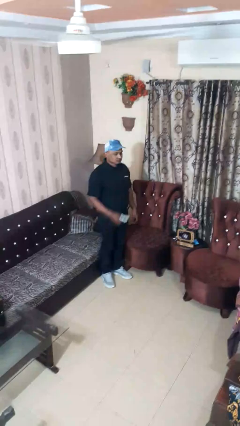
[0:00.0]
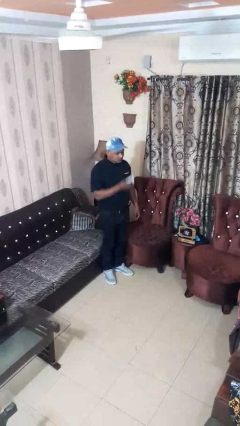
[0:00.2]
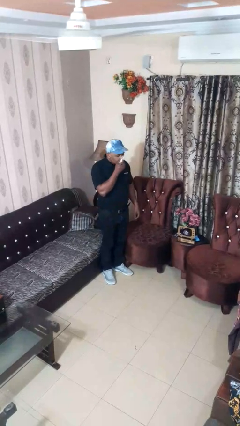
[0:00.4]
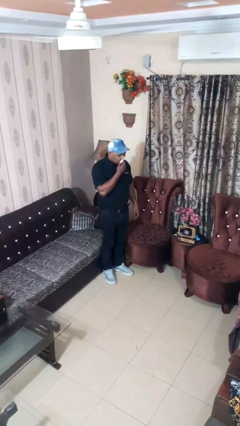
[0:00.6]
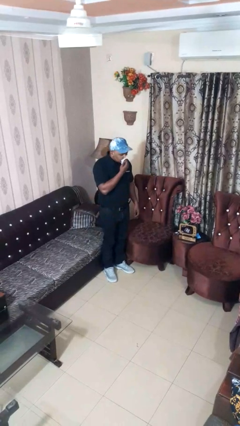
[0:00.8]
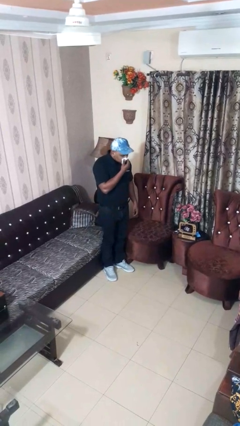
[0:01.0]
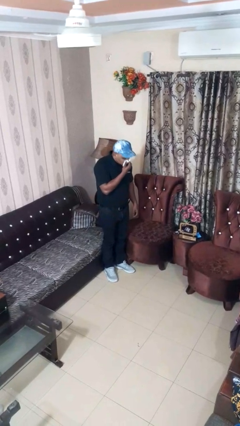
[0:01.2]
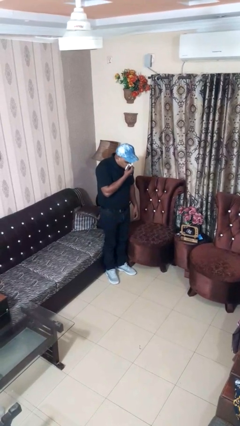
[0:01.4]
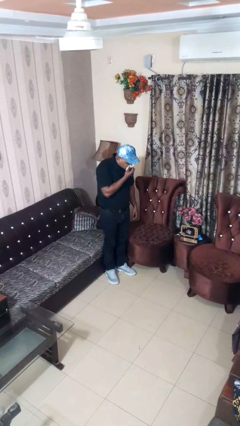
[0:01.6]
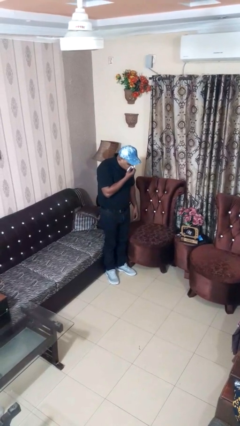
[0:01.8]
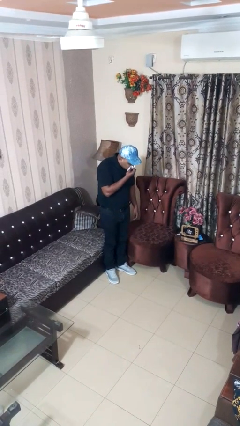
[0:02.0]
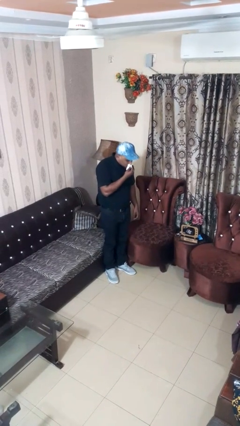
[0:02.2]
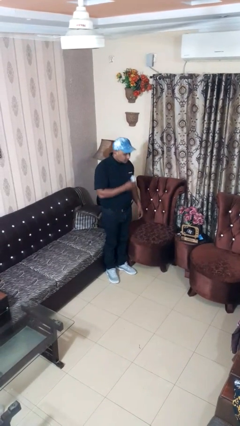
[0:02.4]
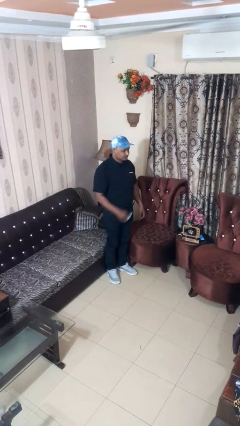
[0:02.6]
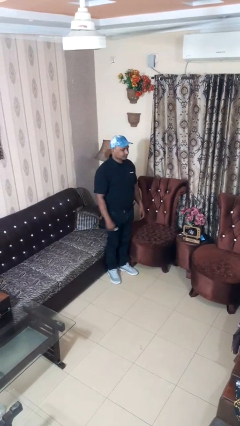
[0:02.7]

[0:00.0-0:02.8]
person blows nose

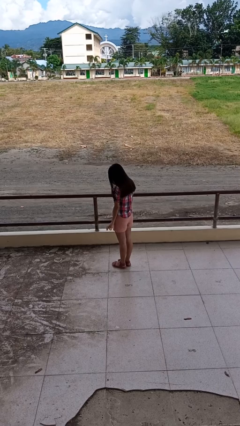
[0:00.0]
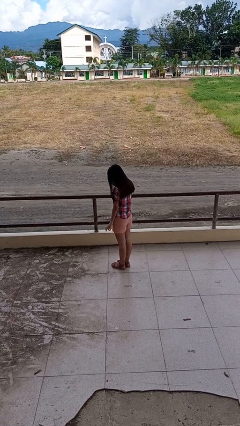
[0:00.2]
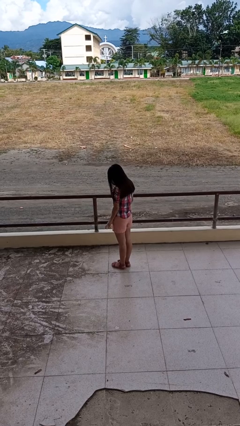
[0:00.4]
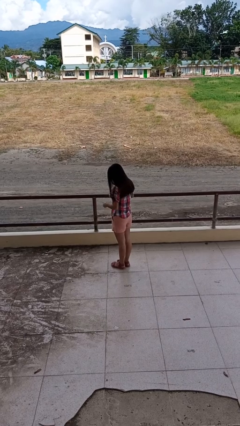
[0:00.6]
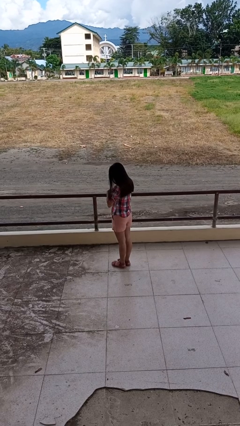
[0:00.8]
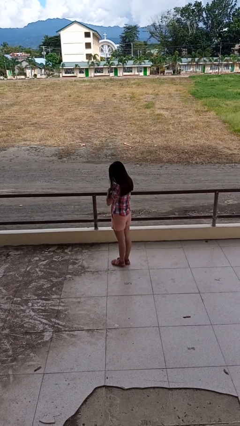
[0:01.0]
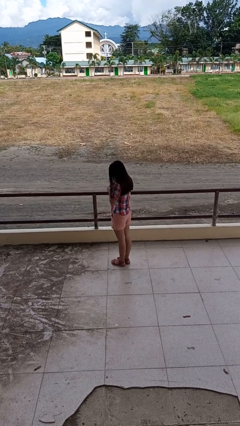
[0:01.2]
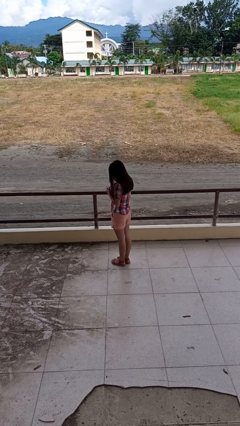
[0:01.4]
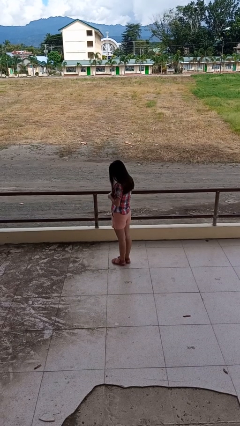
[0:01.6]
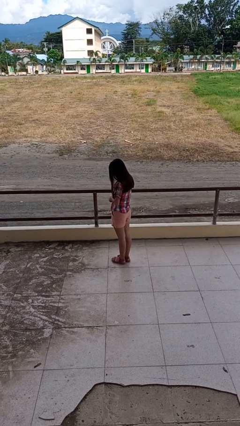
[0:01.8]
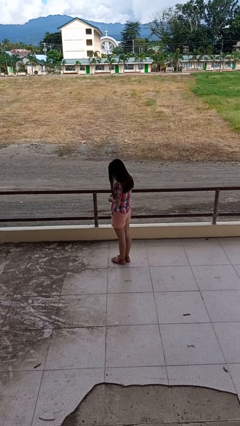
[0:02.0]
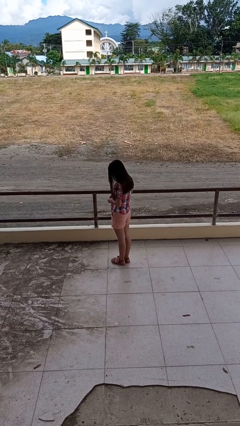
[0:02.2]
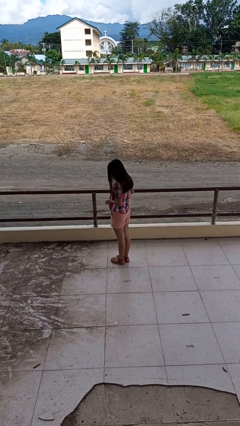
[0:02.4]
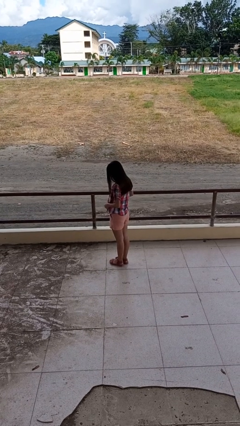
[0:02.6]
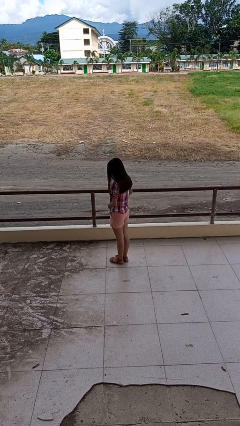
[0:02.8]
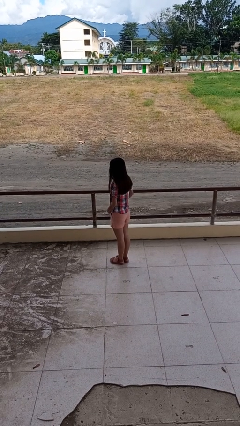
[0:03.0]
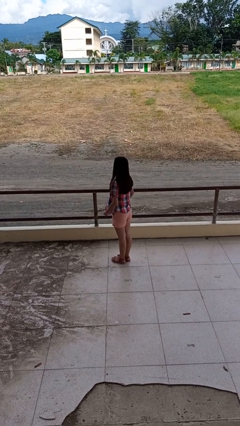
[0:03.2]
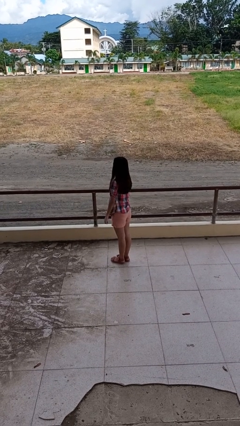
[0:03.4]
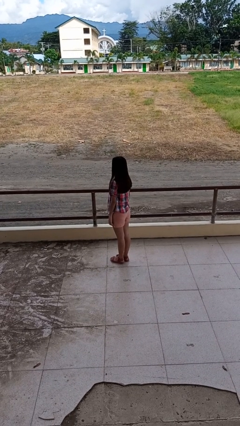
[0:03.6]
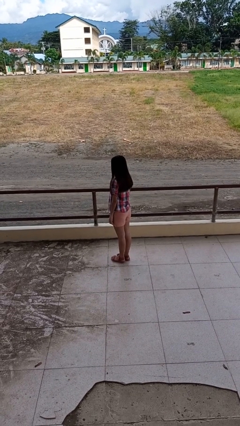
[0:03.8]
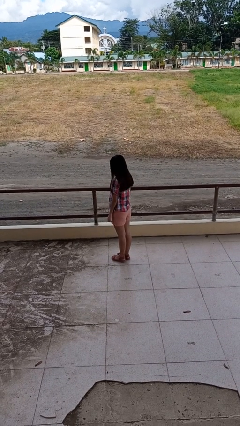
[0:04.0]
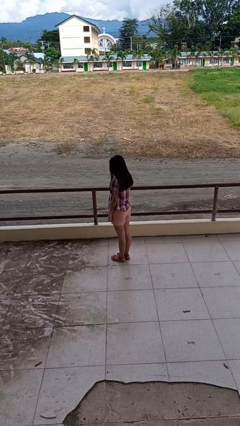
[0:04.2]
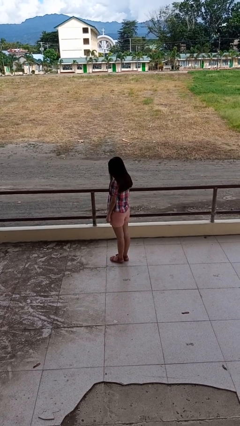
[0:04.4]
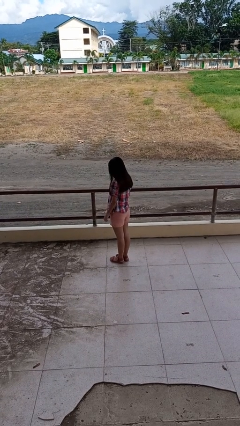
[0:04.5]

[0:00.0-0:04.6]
person unbuttons shirt

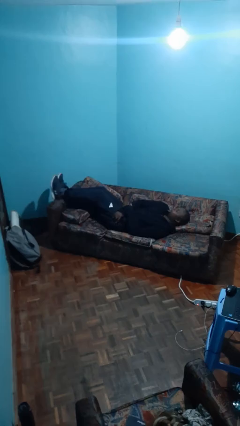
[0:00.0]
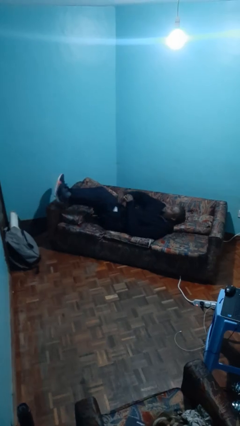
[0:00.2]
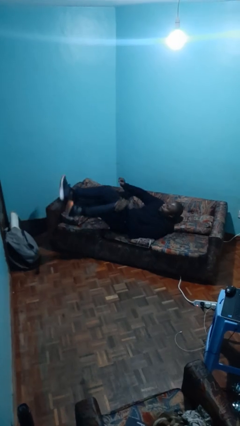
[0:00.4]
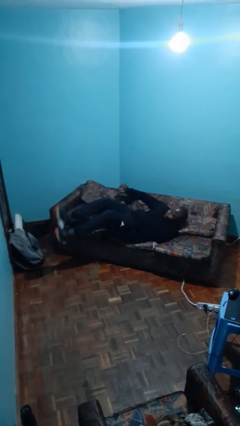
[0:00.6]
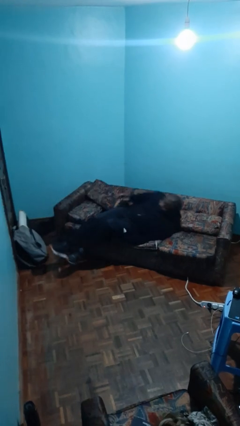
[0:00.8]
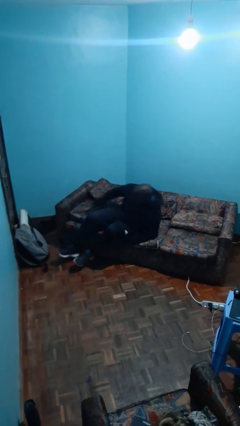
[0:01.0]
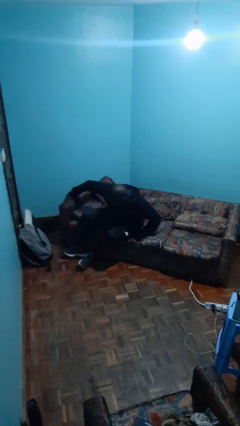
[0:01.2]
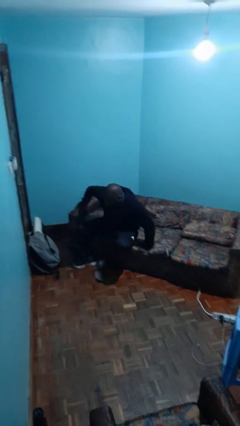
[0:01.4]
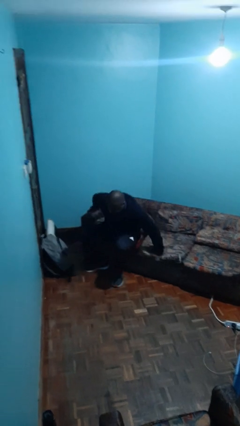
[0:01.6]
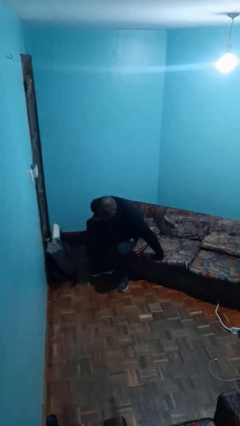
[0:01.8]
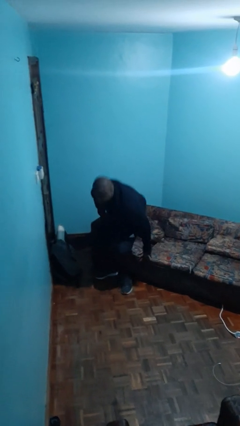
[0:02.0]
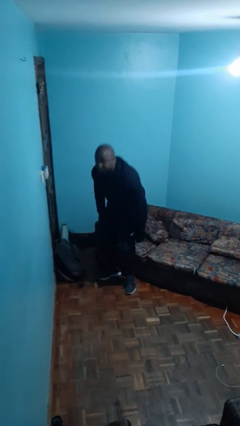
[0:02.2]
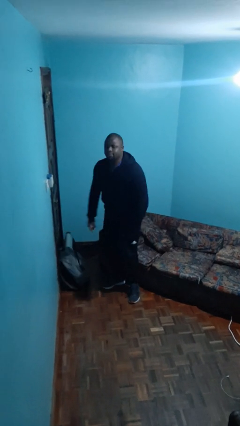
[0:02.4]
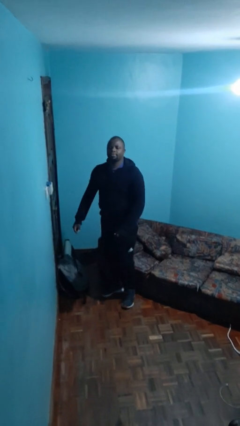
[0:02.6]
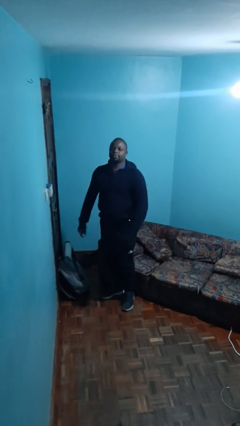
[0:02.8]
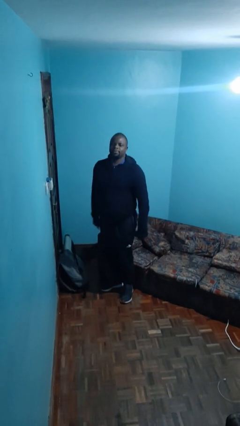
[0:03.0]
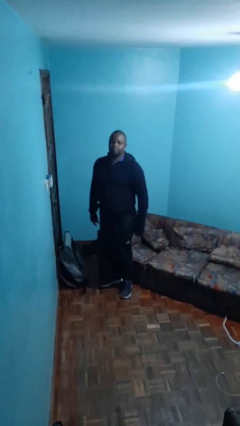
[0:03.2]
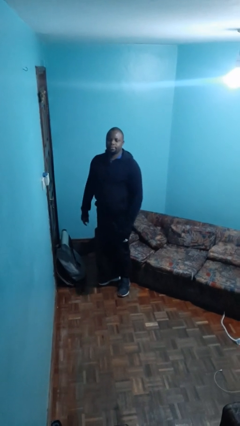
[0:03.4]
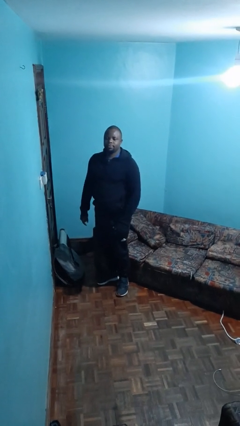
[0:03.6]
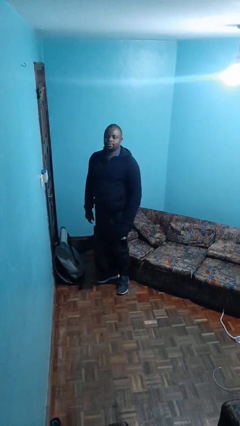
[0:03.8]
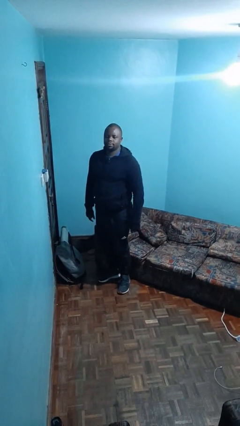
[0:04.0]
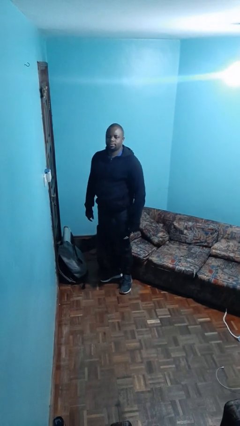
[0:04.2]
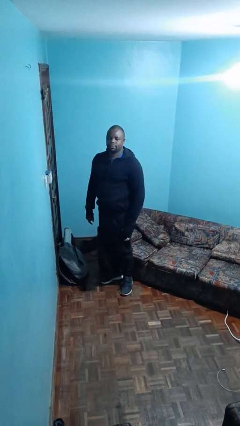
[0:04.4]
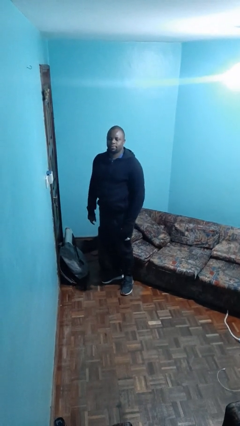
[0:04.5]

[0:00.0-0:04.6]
person stands up

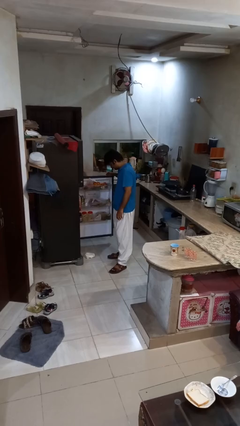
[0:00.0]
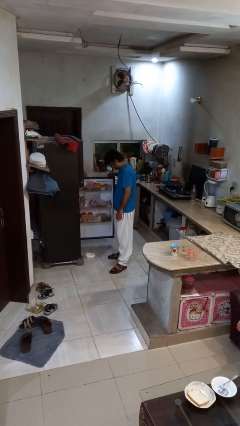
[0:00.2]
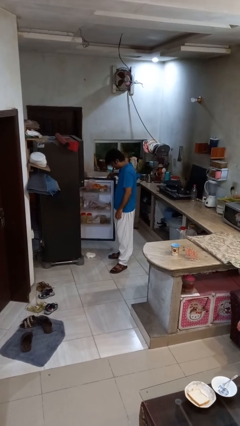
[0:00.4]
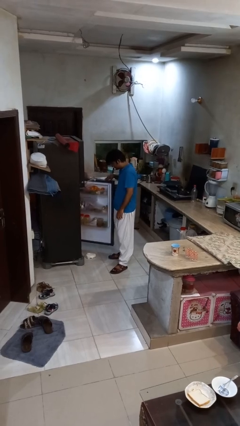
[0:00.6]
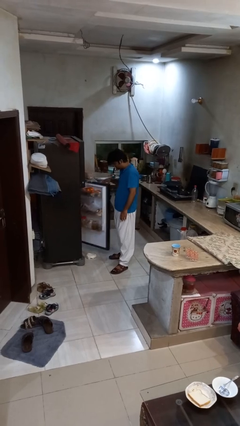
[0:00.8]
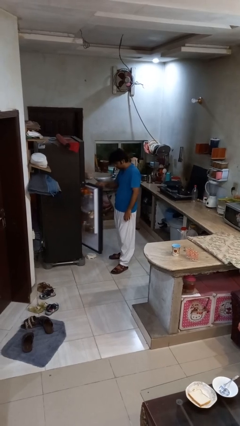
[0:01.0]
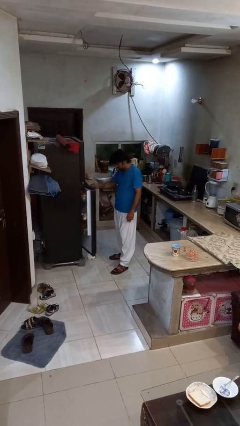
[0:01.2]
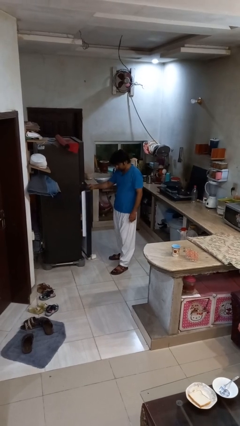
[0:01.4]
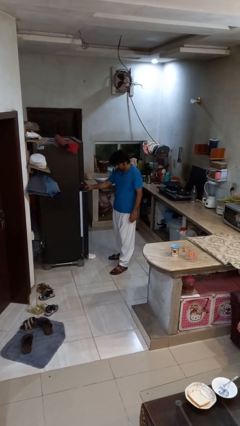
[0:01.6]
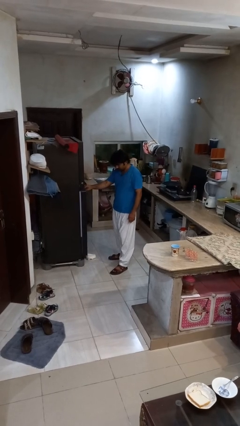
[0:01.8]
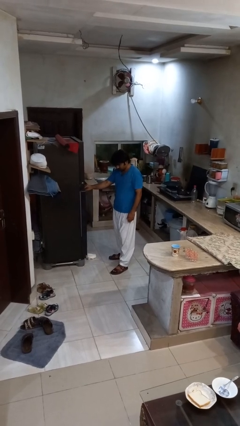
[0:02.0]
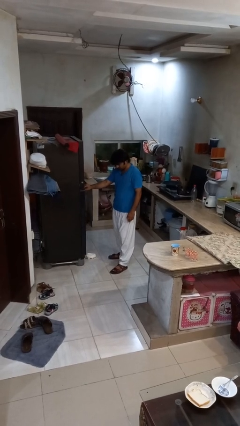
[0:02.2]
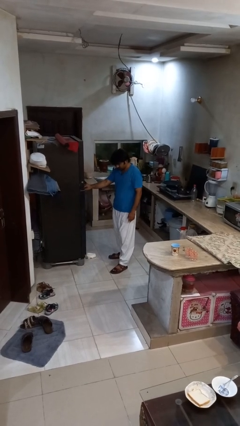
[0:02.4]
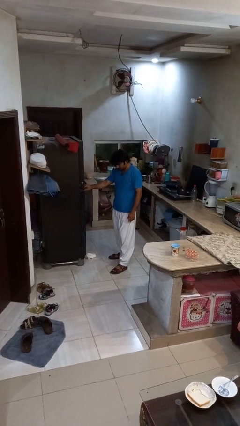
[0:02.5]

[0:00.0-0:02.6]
person closes refrigerator

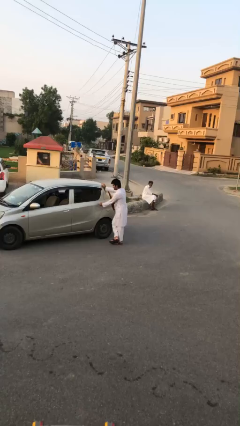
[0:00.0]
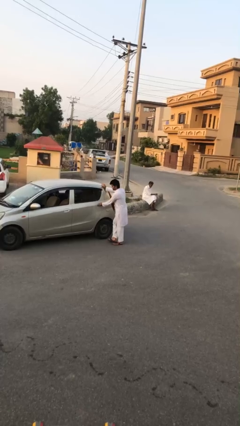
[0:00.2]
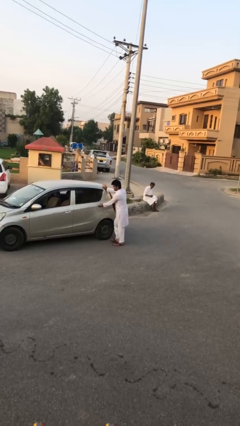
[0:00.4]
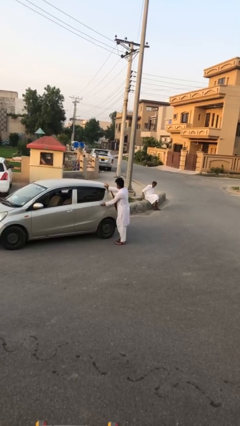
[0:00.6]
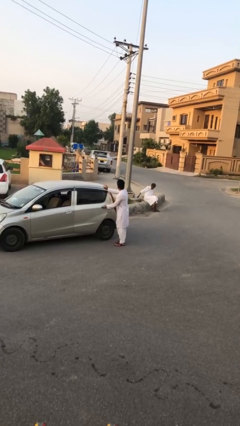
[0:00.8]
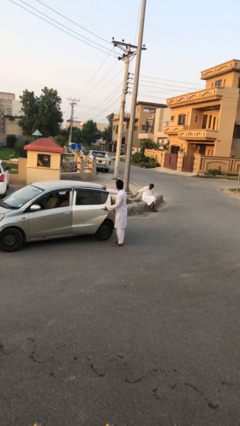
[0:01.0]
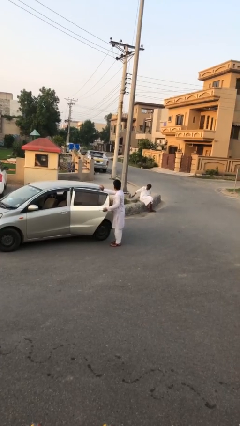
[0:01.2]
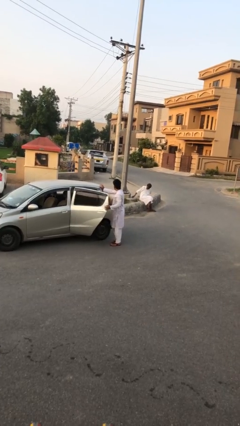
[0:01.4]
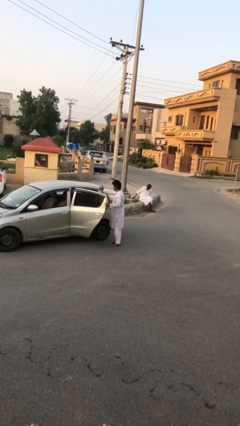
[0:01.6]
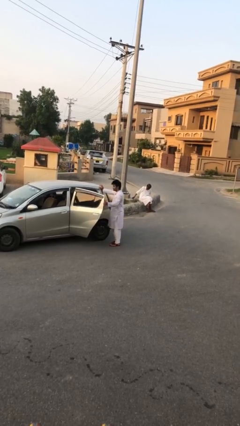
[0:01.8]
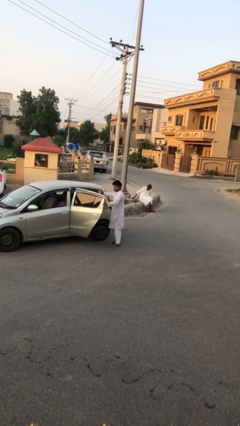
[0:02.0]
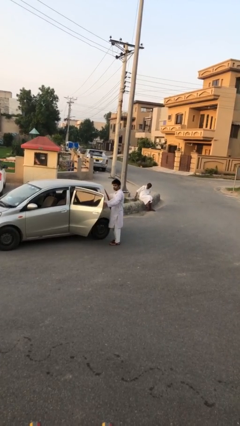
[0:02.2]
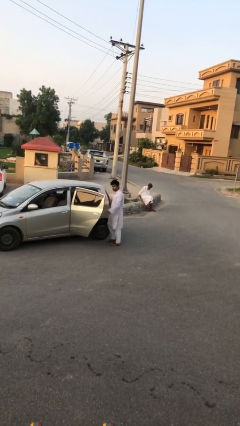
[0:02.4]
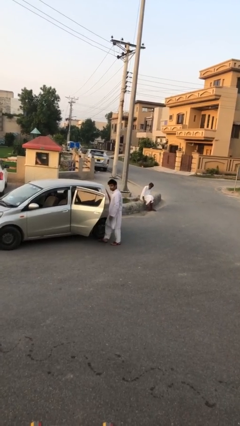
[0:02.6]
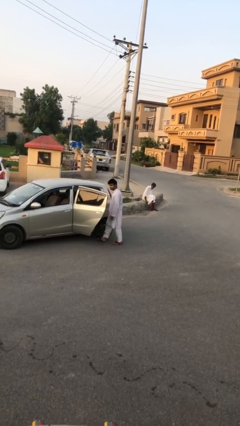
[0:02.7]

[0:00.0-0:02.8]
person opens car door

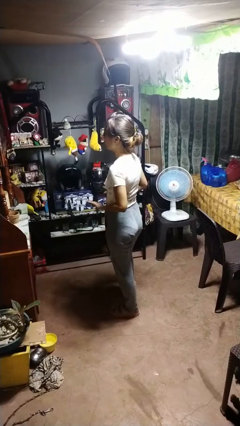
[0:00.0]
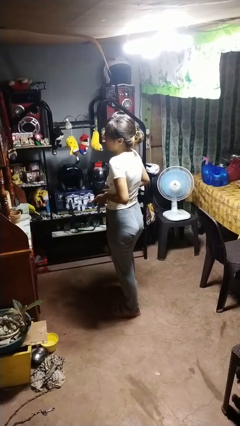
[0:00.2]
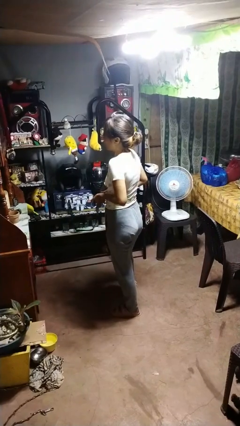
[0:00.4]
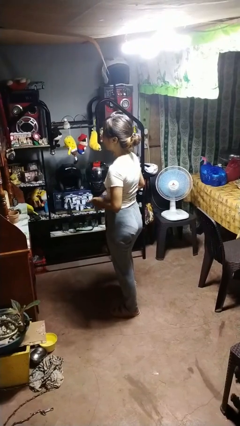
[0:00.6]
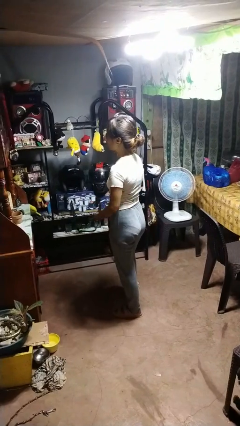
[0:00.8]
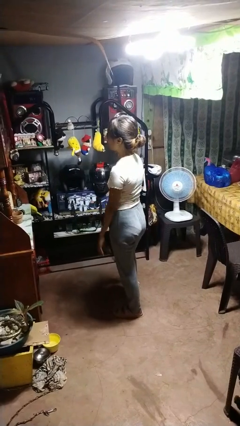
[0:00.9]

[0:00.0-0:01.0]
person shrugs
